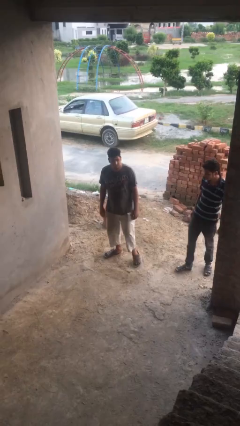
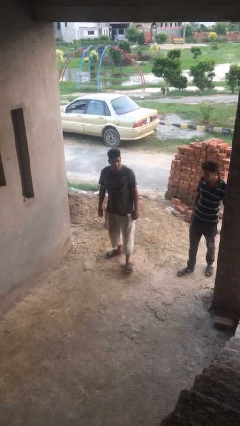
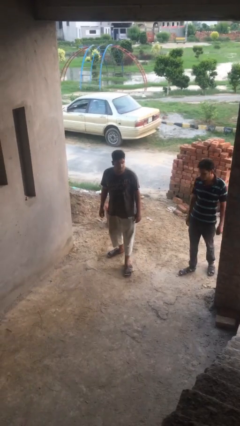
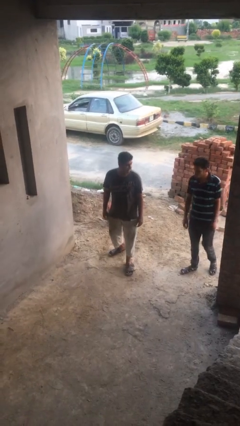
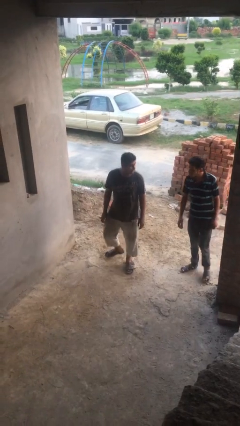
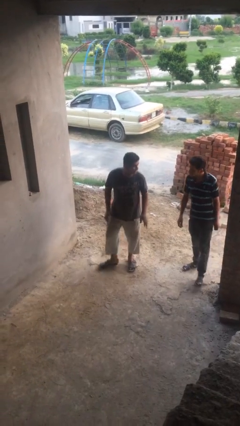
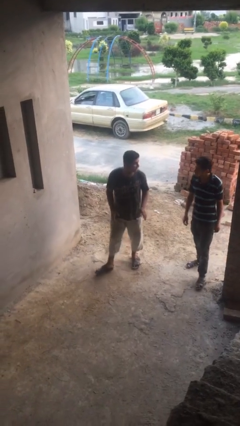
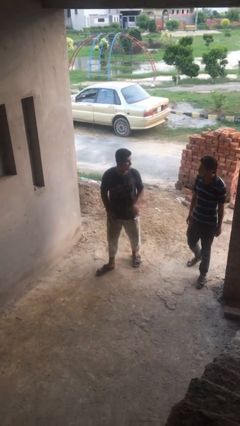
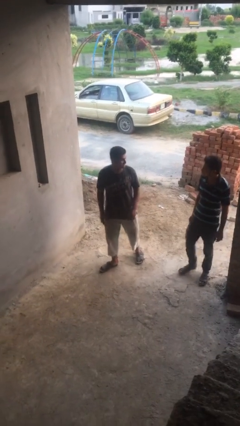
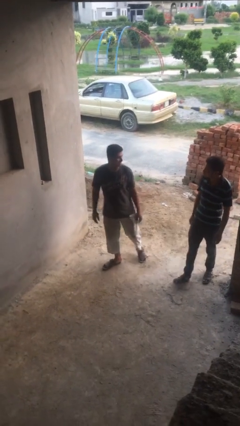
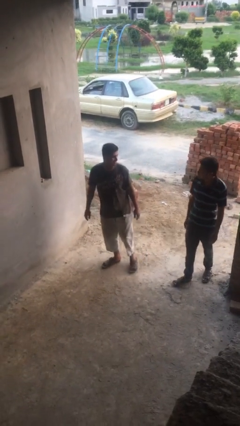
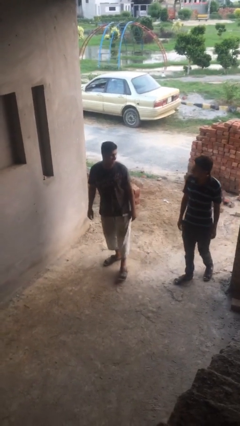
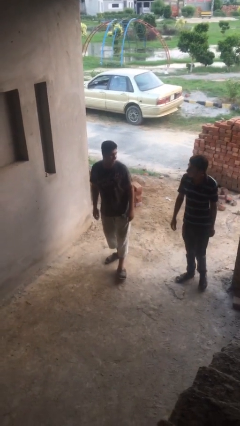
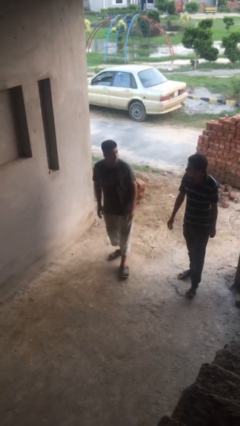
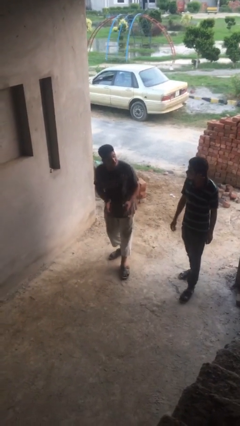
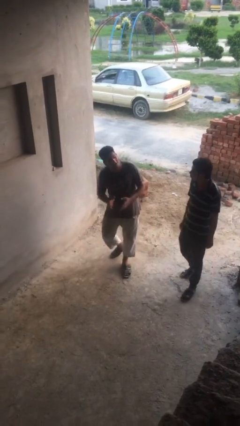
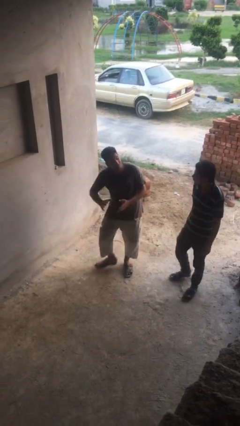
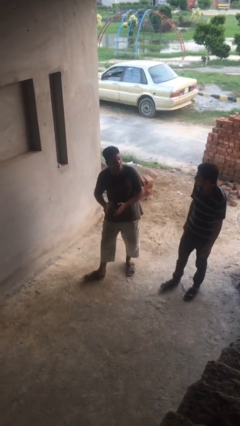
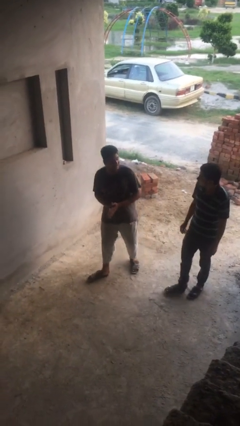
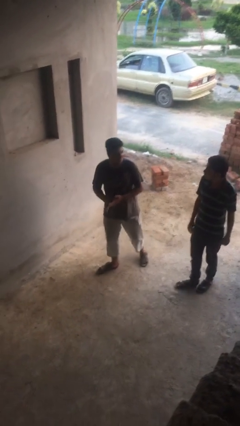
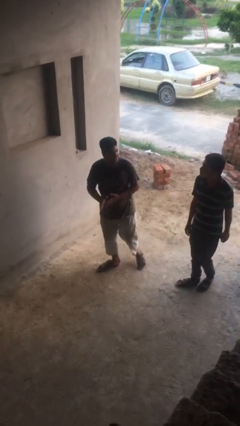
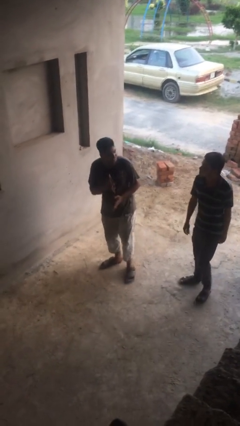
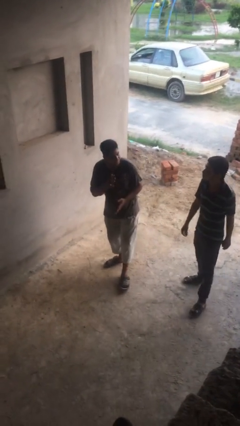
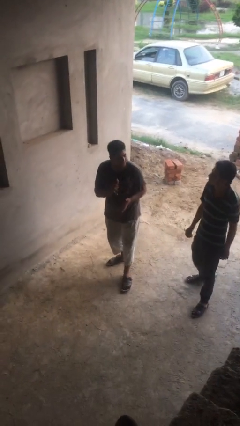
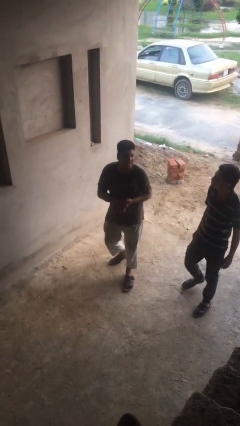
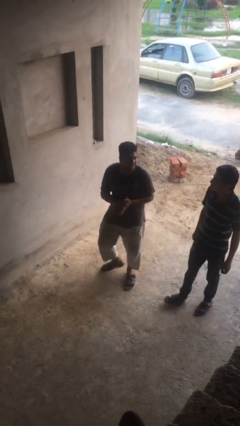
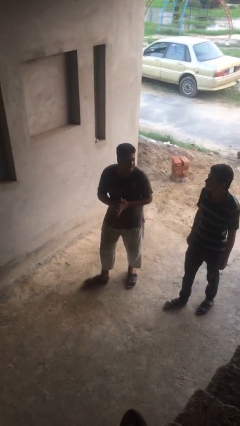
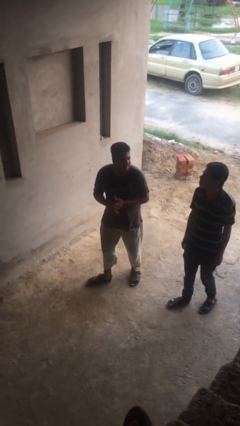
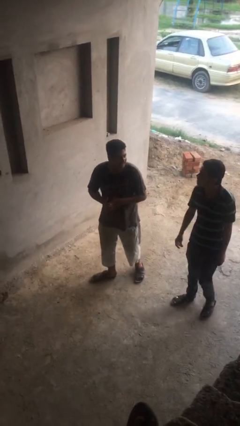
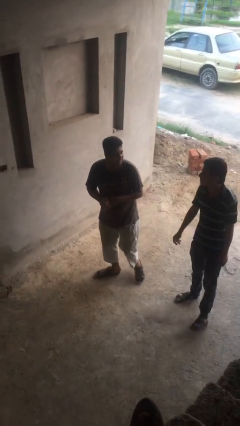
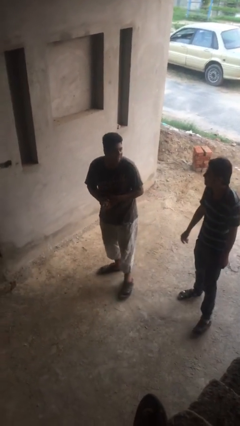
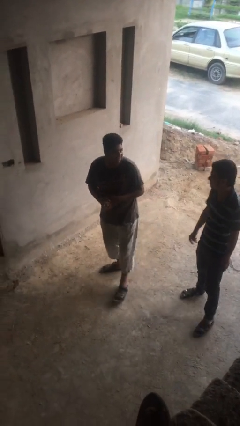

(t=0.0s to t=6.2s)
person talks to person

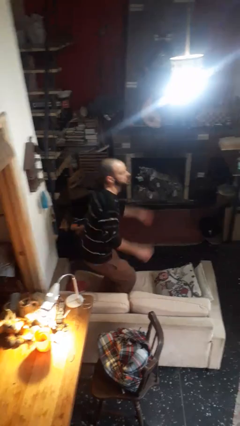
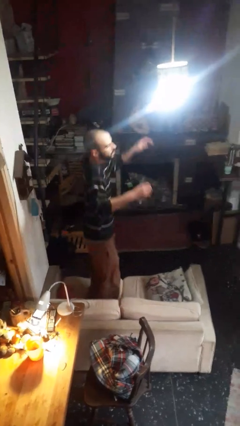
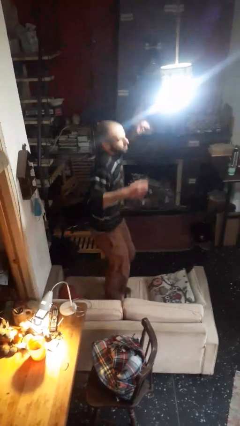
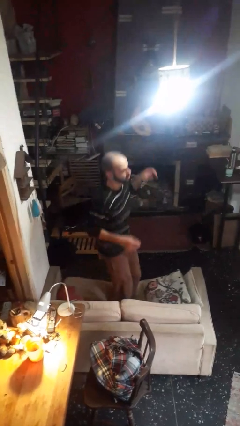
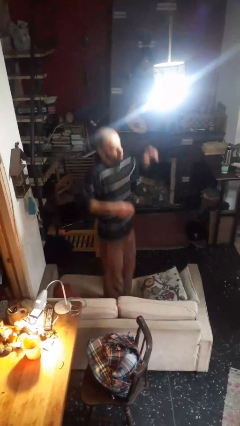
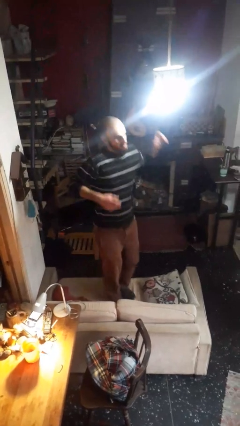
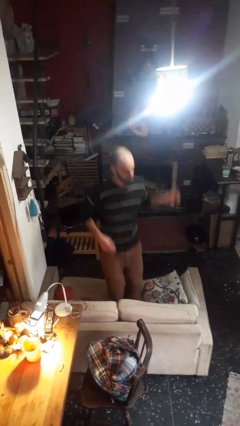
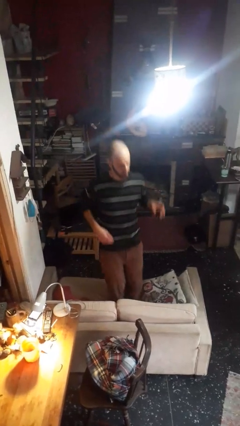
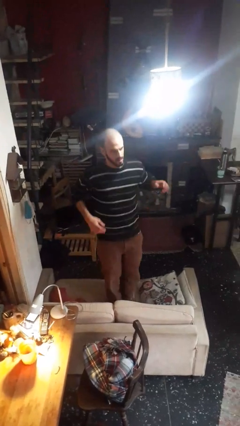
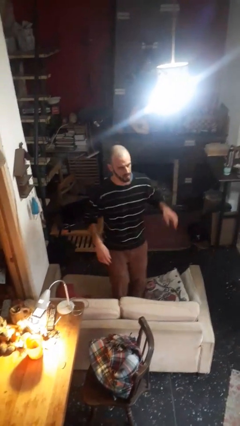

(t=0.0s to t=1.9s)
person jumps on couch

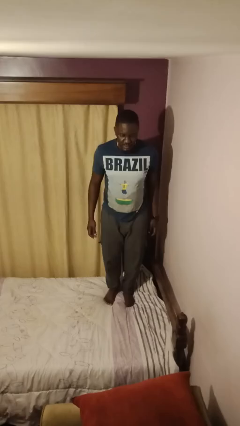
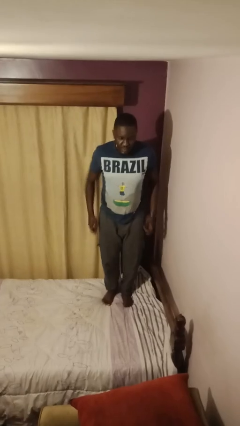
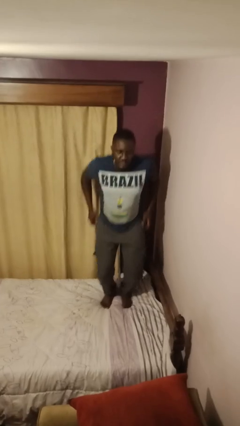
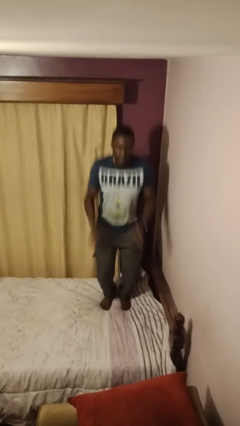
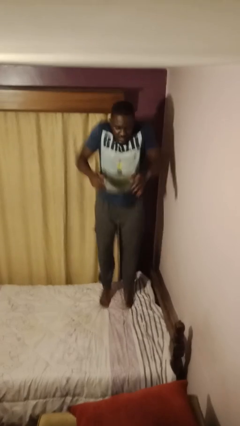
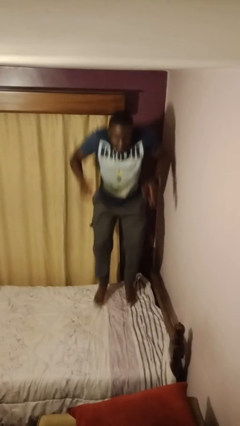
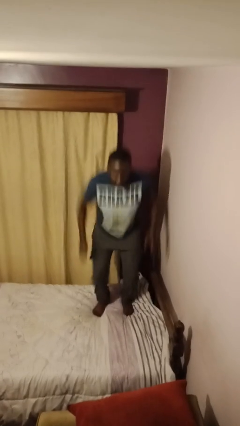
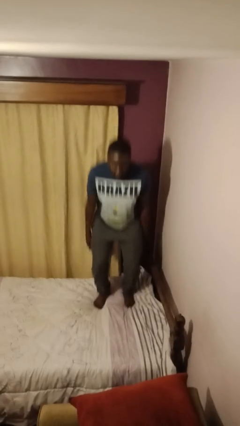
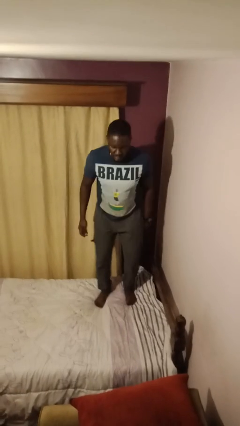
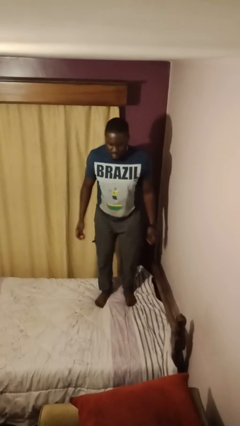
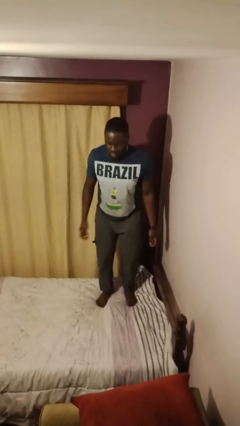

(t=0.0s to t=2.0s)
person jumps on bed

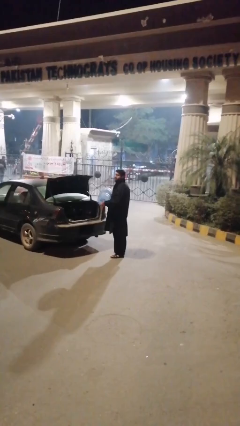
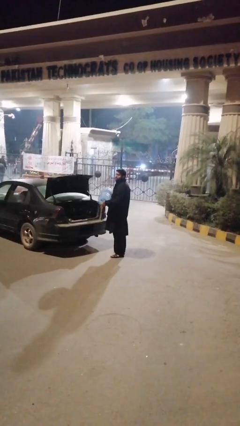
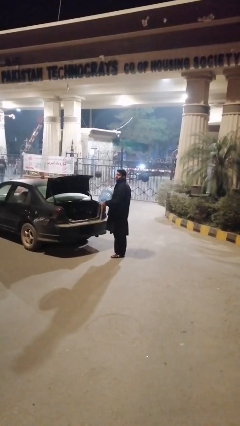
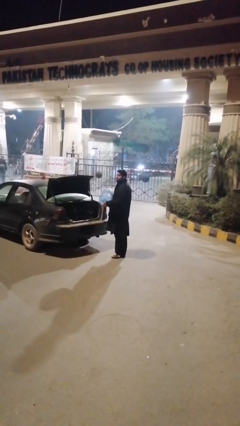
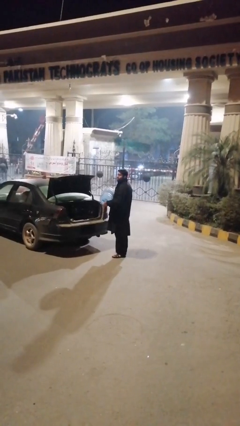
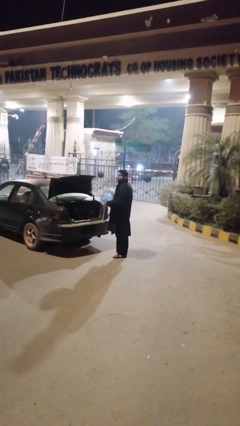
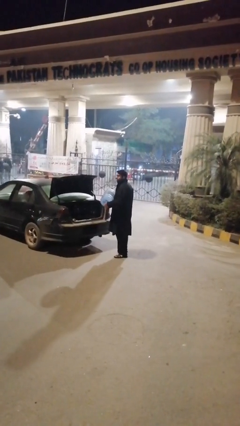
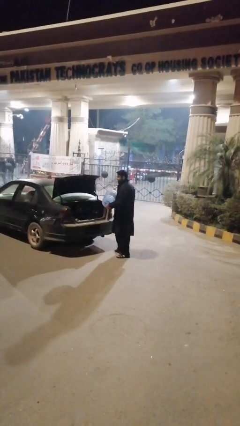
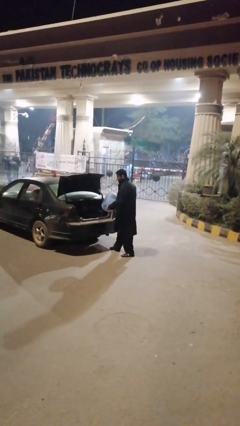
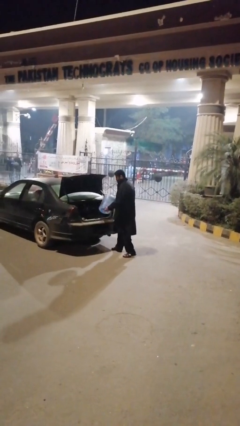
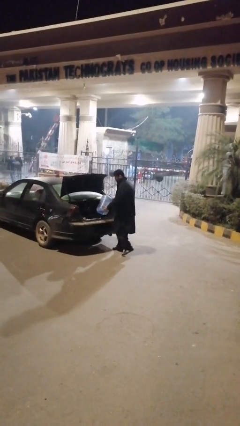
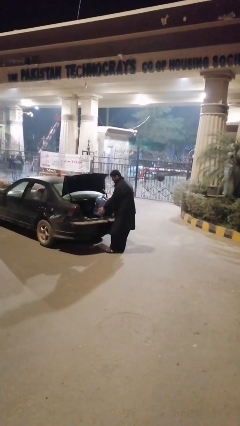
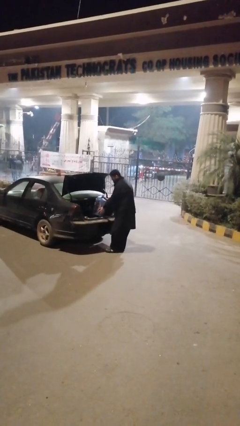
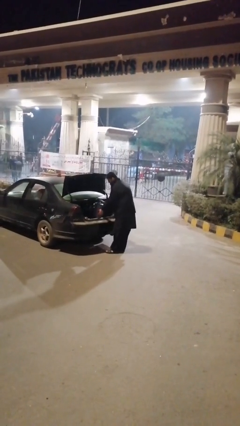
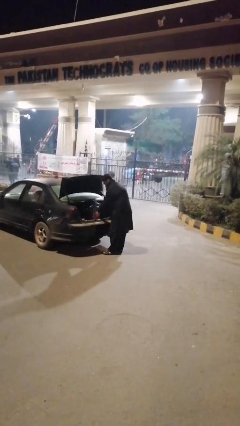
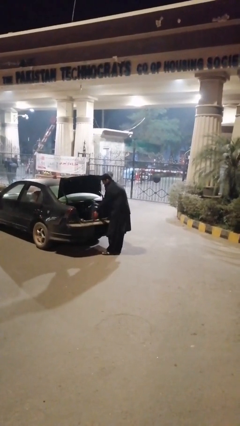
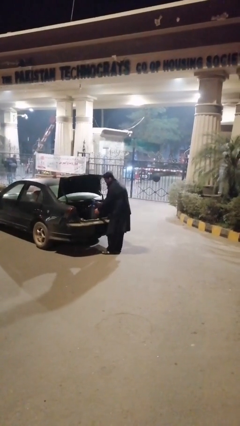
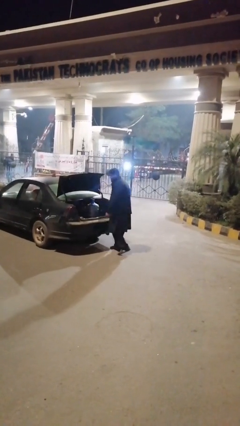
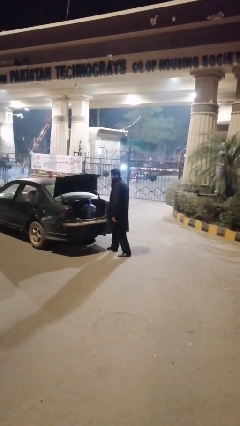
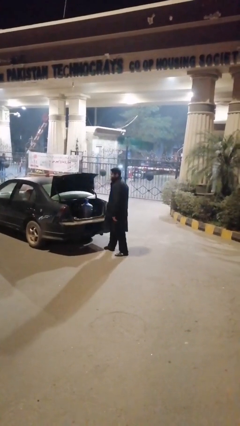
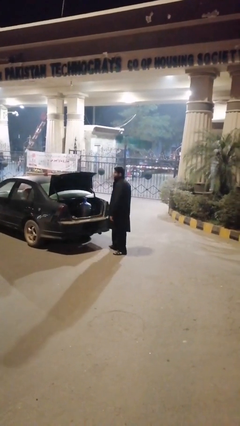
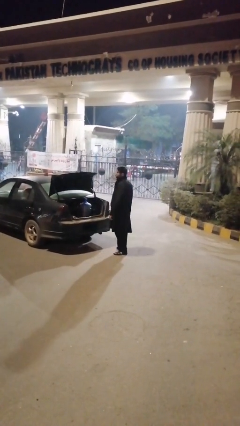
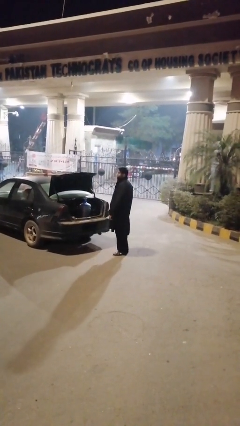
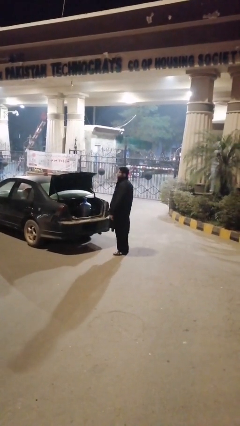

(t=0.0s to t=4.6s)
person loads car

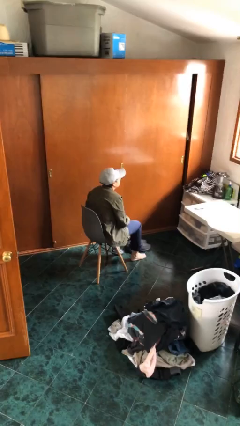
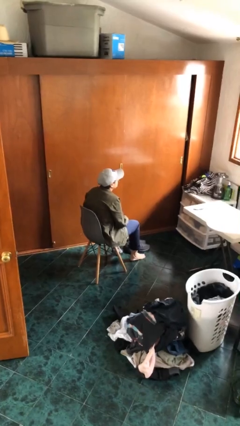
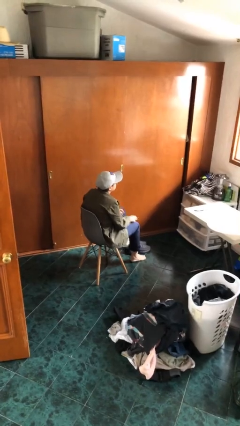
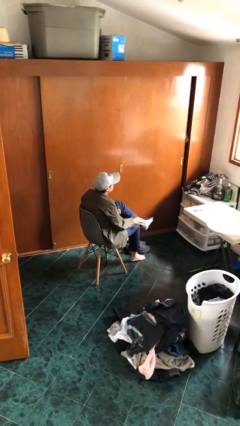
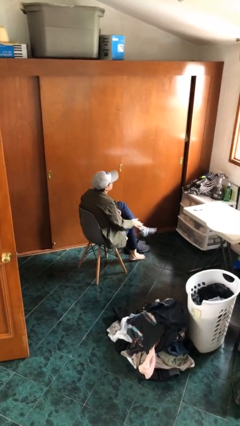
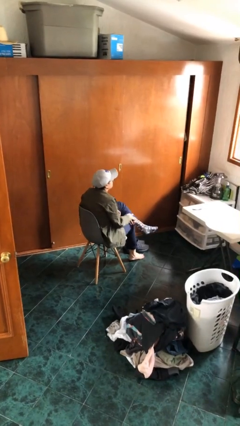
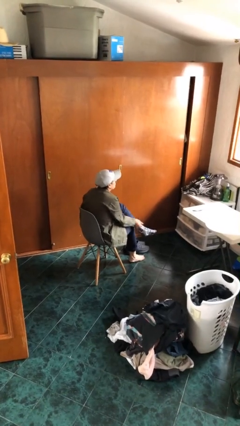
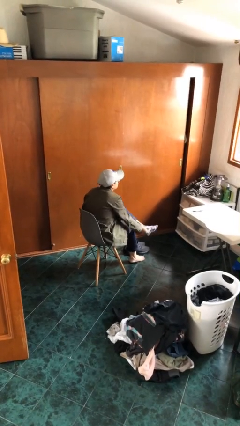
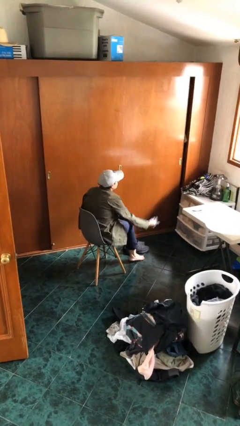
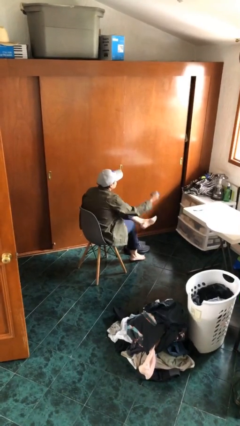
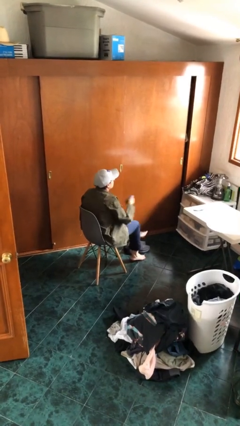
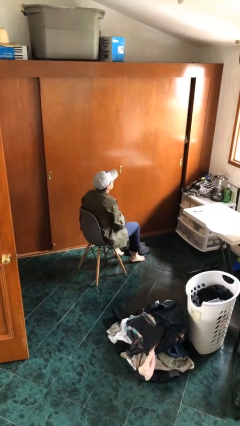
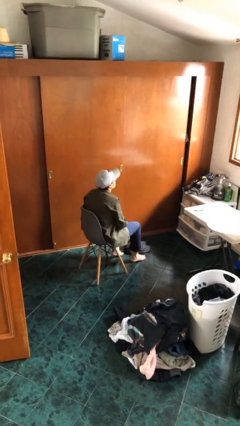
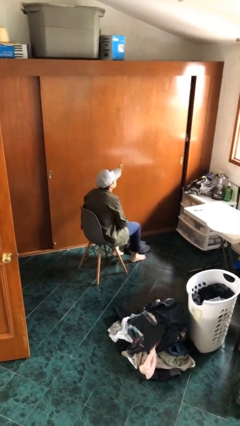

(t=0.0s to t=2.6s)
person takes off socks

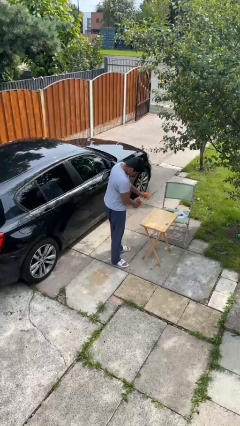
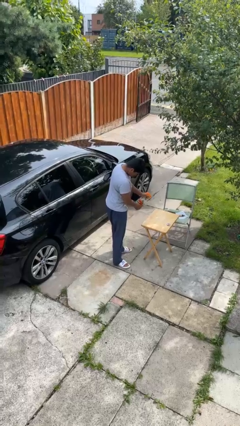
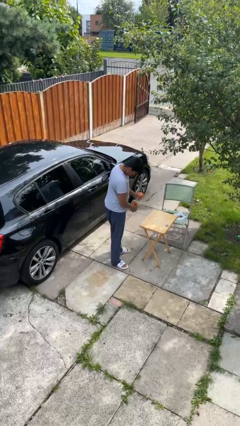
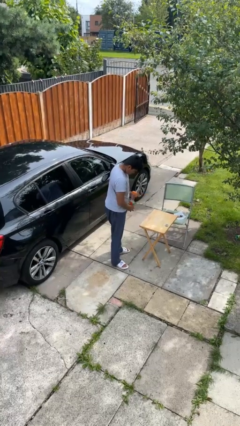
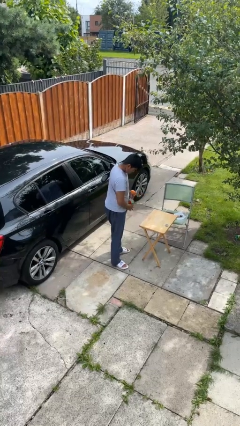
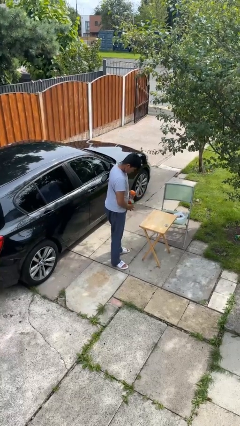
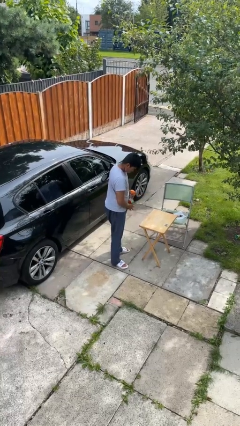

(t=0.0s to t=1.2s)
person sprays from bottle
